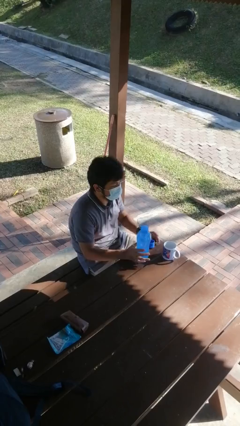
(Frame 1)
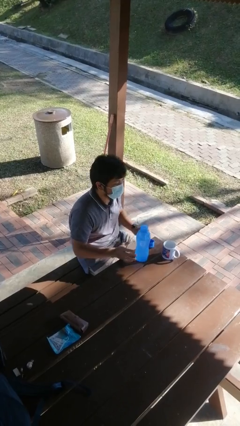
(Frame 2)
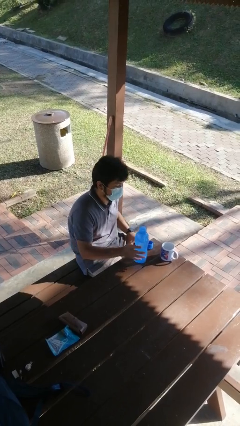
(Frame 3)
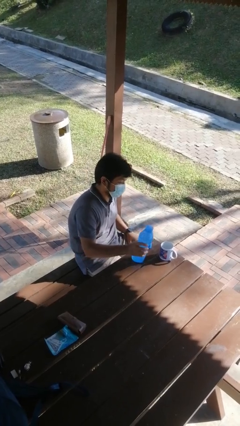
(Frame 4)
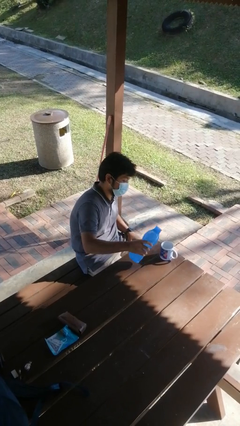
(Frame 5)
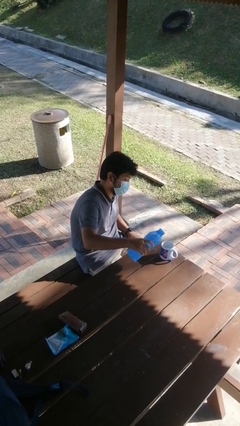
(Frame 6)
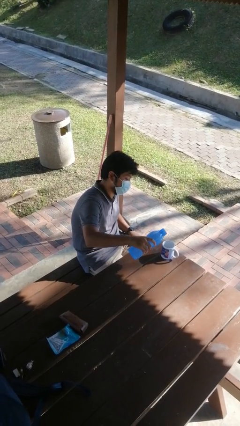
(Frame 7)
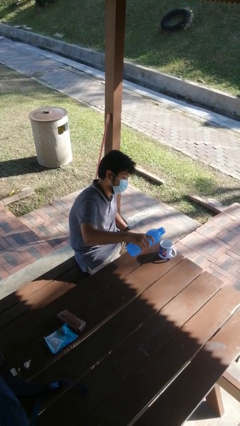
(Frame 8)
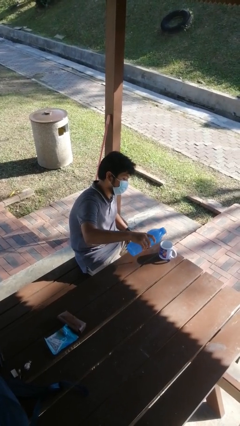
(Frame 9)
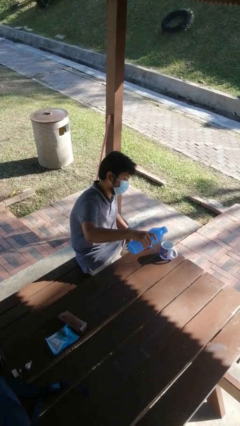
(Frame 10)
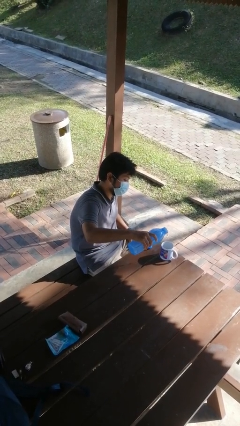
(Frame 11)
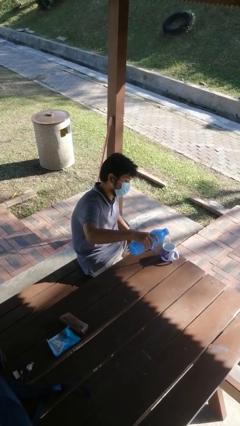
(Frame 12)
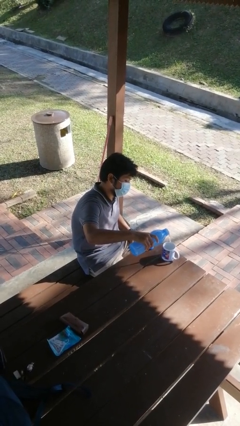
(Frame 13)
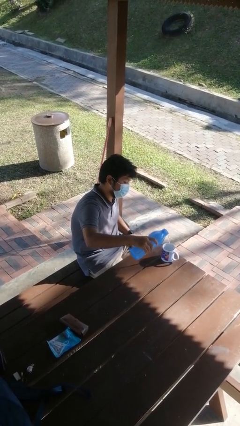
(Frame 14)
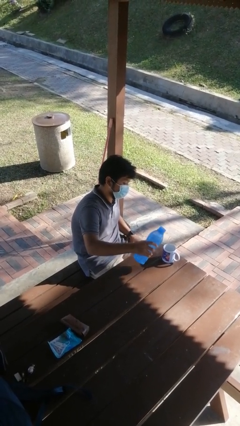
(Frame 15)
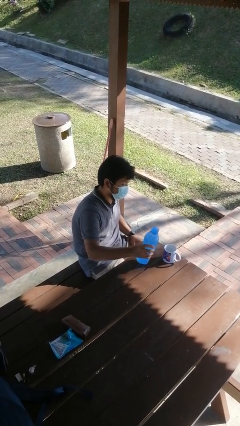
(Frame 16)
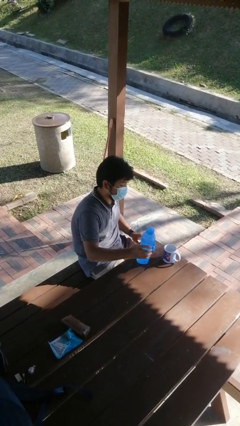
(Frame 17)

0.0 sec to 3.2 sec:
person pours liquid into cup

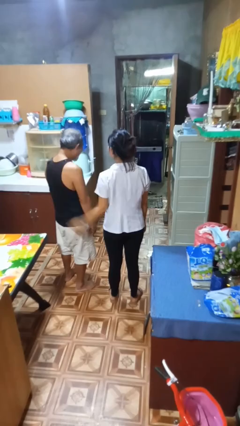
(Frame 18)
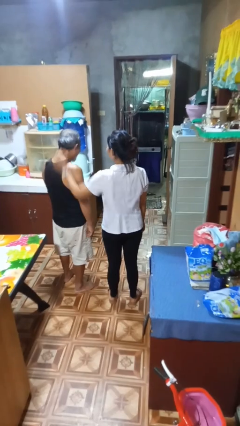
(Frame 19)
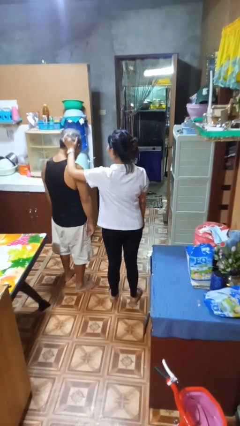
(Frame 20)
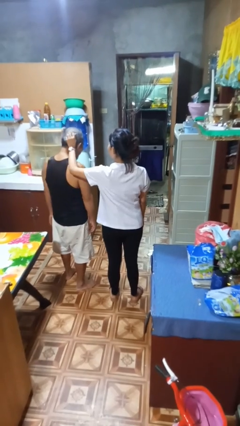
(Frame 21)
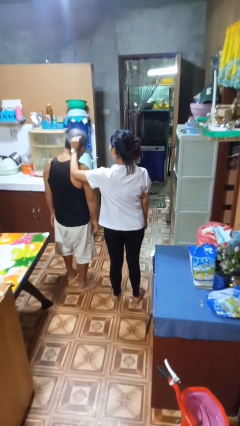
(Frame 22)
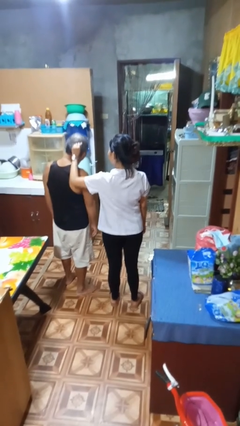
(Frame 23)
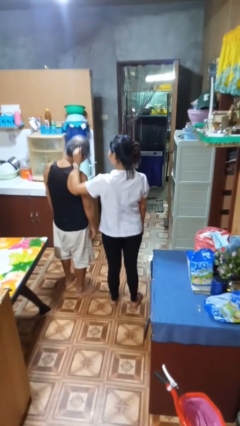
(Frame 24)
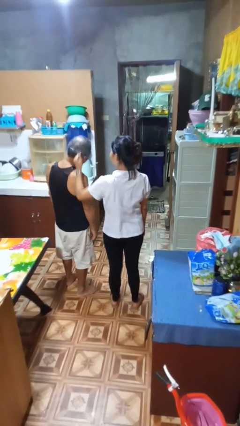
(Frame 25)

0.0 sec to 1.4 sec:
person grabs person by hair

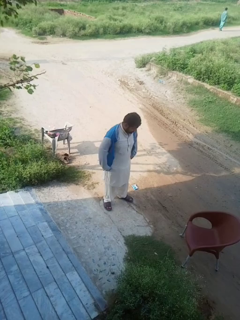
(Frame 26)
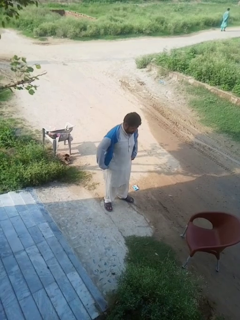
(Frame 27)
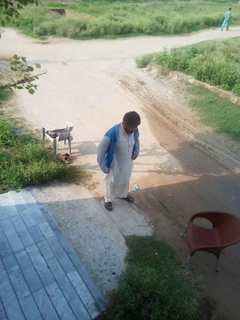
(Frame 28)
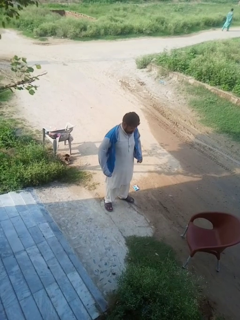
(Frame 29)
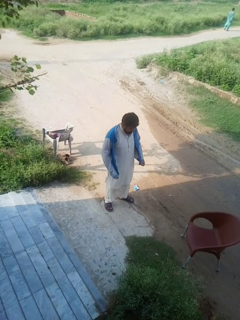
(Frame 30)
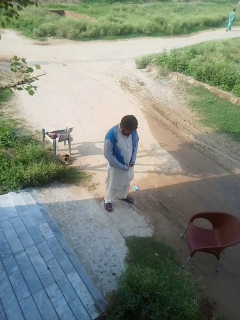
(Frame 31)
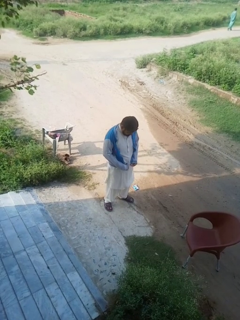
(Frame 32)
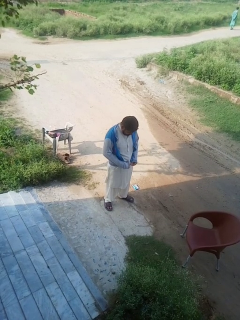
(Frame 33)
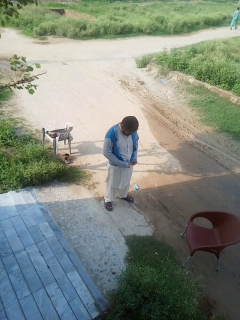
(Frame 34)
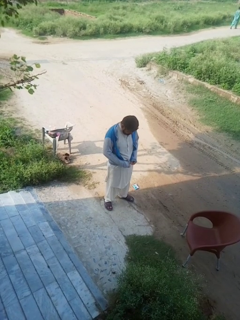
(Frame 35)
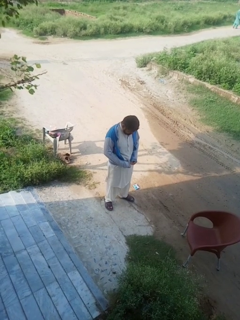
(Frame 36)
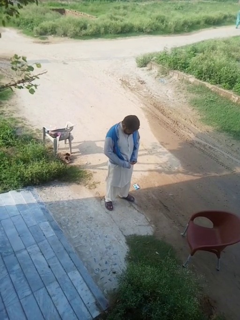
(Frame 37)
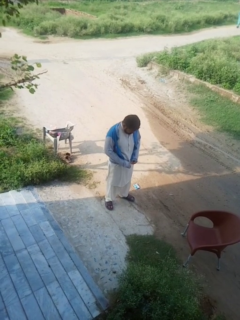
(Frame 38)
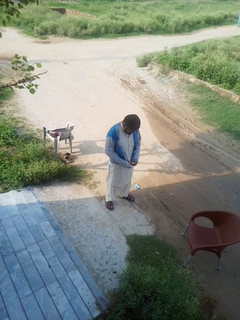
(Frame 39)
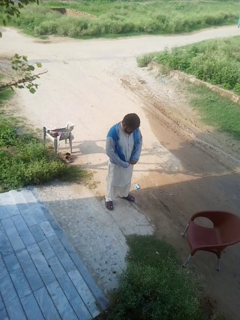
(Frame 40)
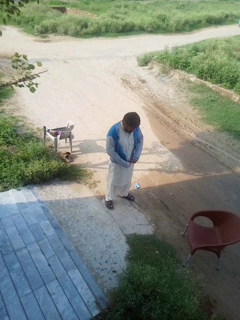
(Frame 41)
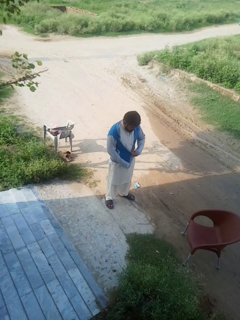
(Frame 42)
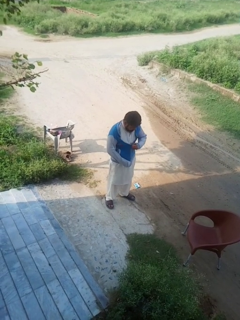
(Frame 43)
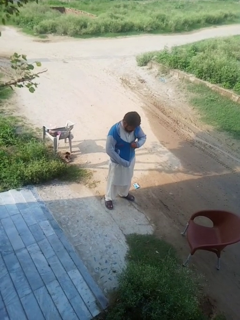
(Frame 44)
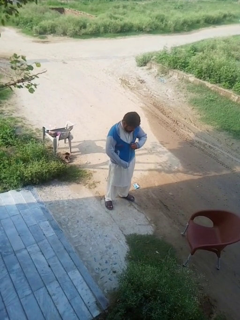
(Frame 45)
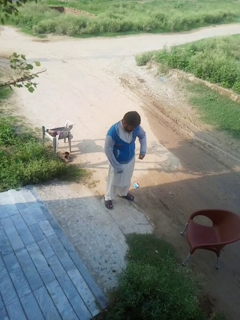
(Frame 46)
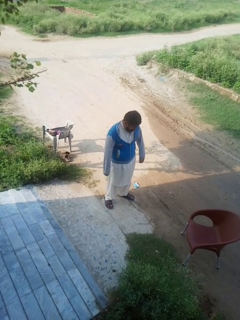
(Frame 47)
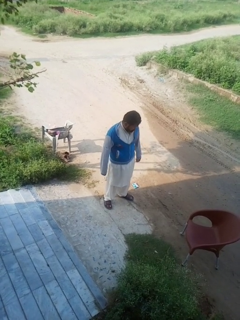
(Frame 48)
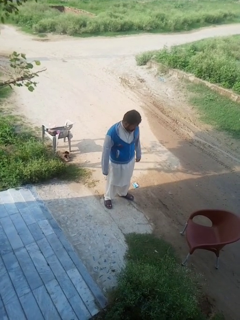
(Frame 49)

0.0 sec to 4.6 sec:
person zips up jacket

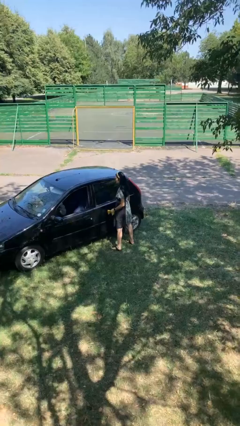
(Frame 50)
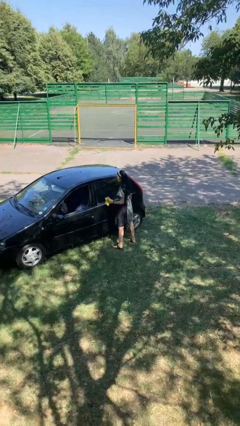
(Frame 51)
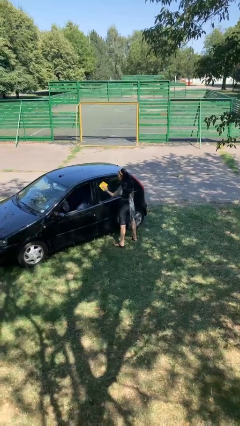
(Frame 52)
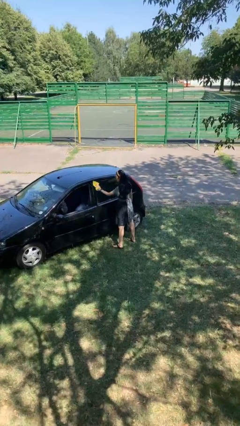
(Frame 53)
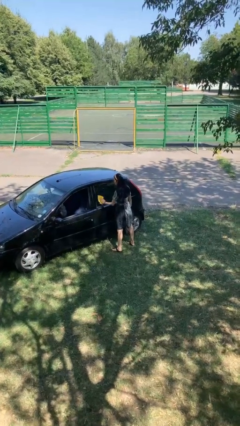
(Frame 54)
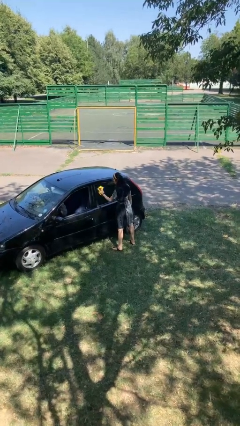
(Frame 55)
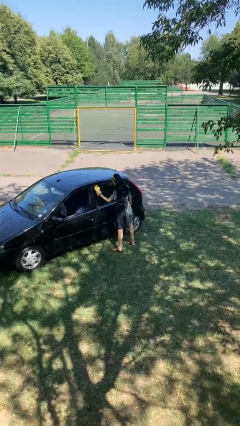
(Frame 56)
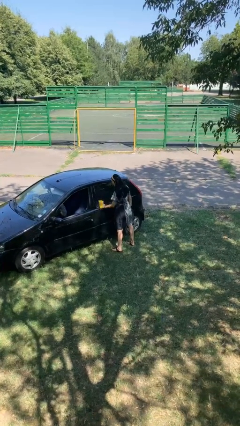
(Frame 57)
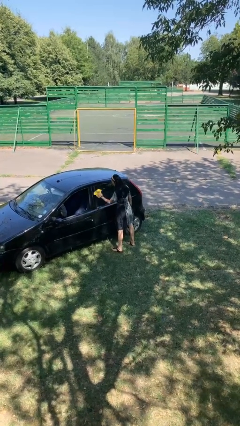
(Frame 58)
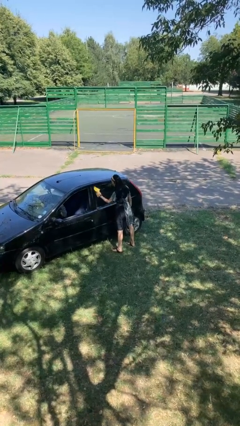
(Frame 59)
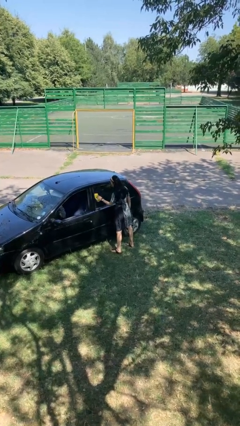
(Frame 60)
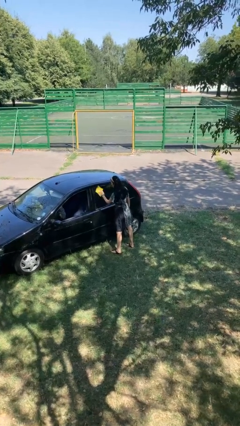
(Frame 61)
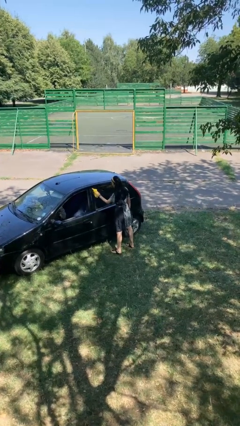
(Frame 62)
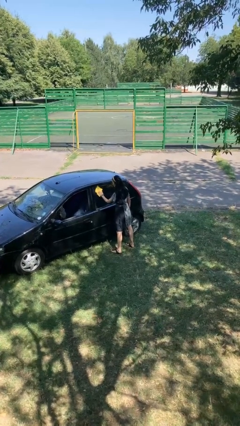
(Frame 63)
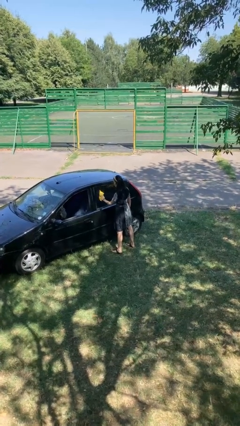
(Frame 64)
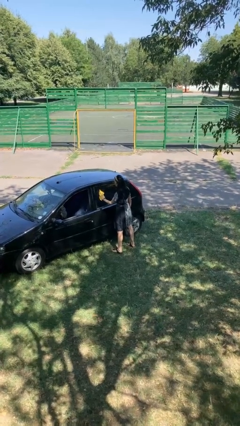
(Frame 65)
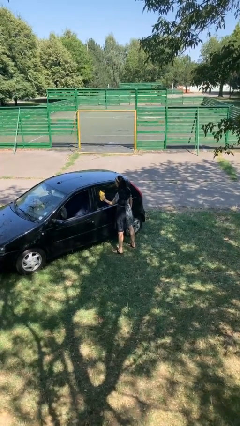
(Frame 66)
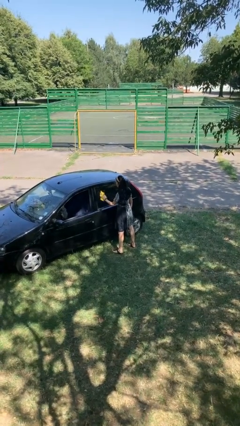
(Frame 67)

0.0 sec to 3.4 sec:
person polishes car with rag

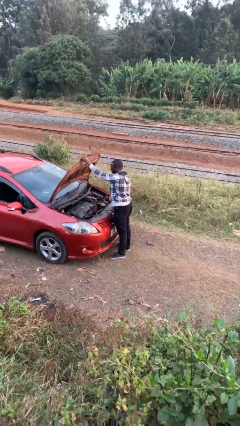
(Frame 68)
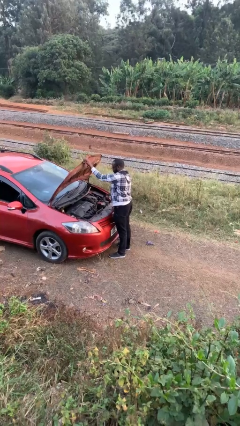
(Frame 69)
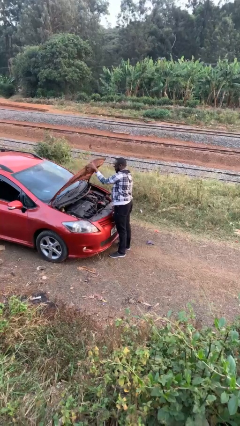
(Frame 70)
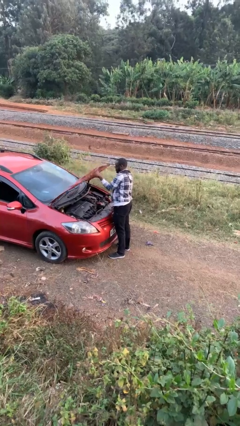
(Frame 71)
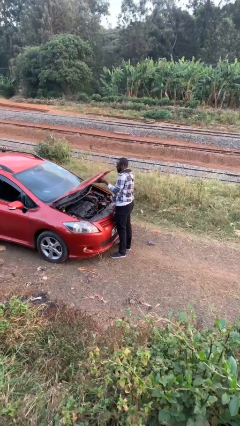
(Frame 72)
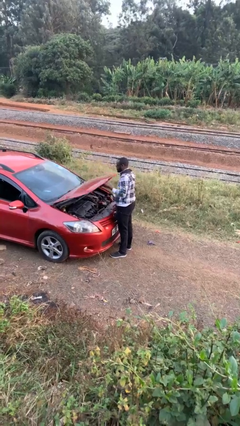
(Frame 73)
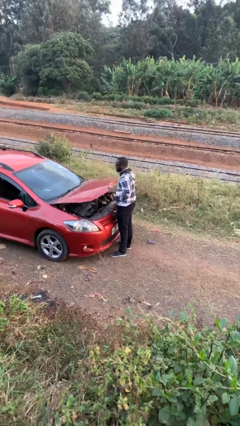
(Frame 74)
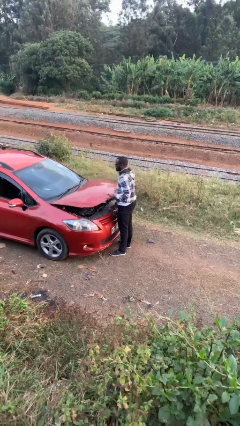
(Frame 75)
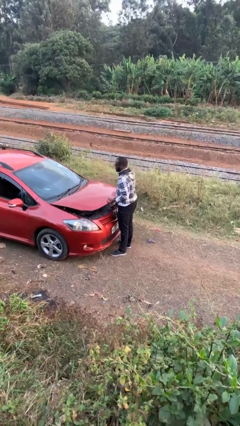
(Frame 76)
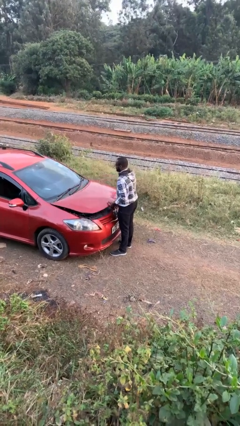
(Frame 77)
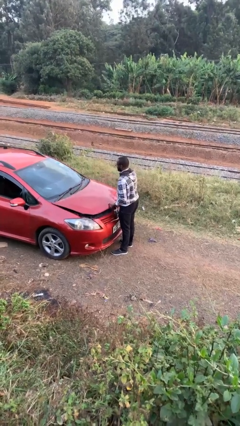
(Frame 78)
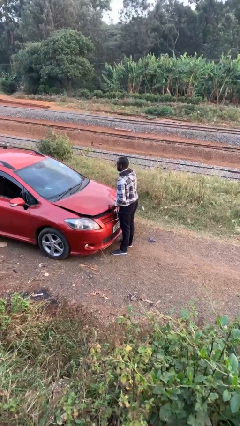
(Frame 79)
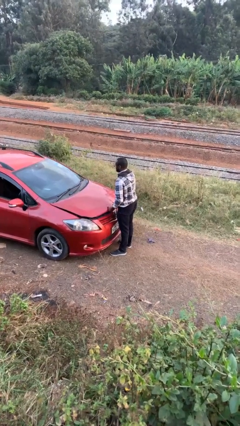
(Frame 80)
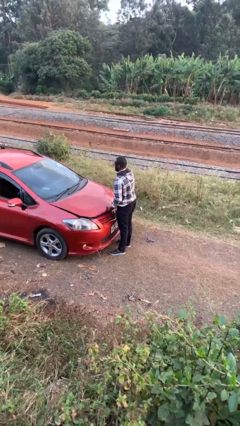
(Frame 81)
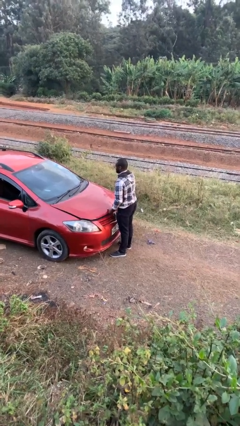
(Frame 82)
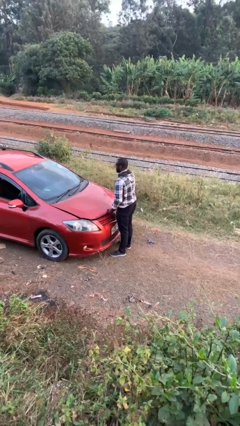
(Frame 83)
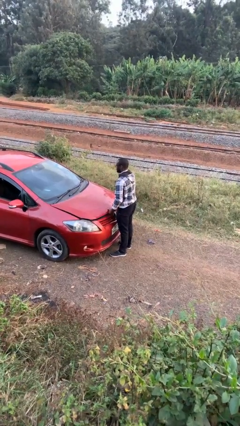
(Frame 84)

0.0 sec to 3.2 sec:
person closes car hood

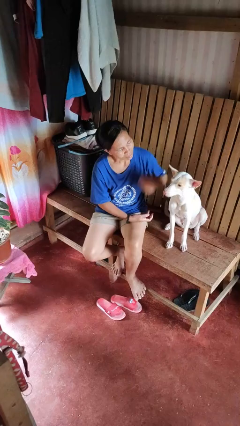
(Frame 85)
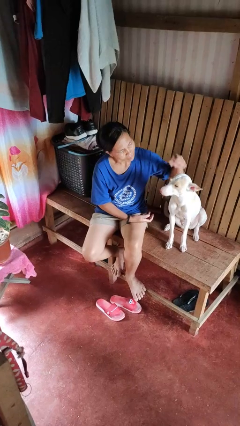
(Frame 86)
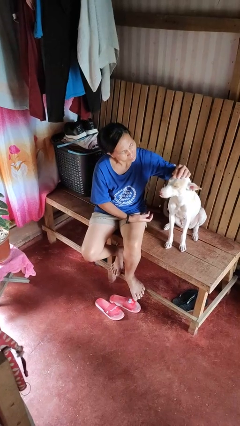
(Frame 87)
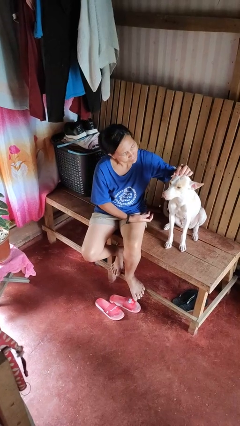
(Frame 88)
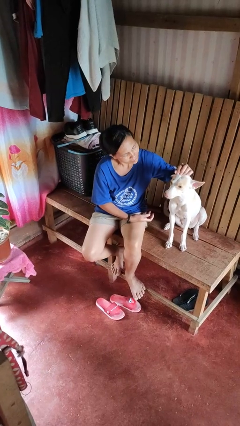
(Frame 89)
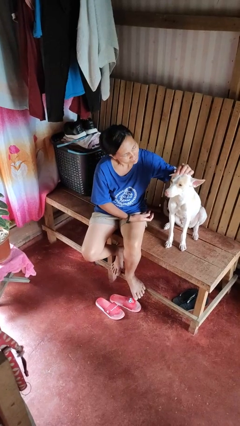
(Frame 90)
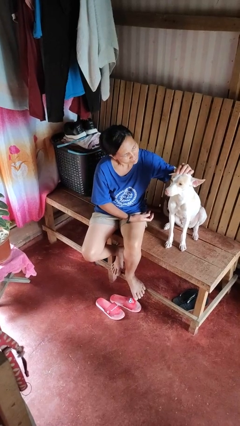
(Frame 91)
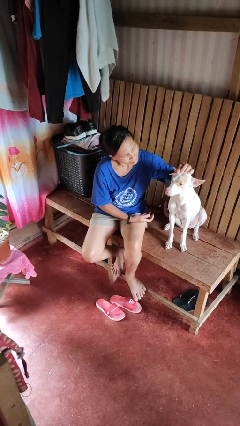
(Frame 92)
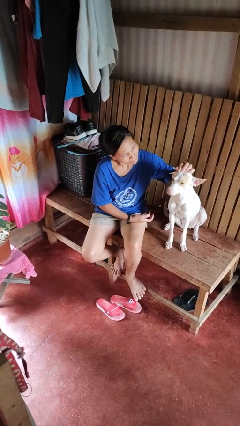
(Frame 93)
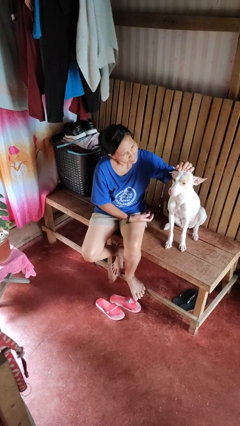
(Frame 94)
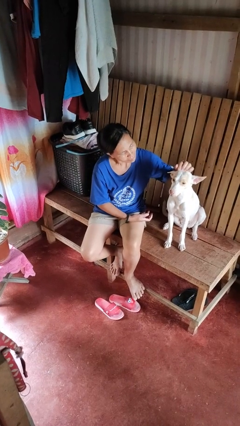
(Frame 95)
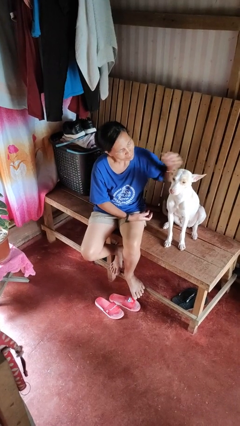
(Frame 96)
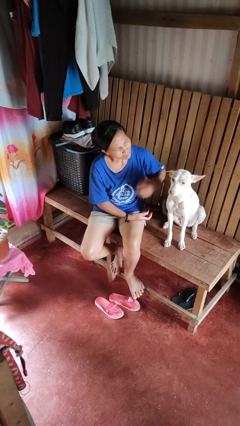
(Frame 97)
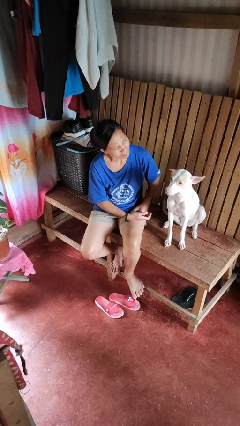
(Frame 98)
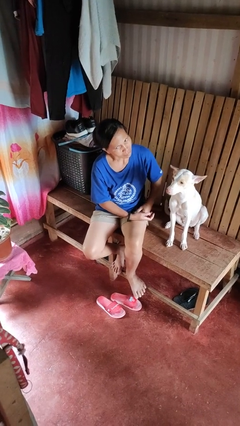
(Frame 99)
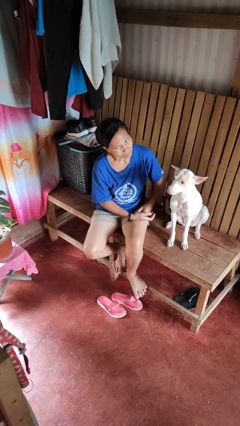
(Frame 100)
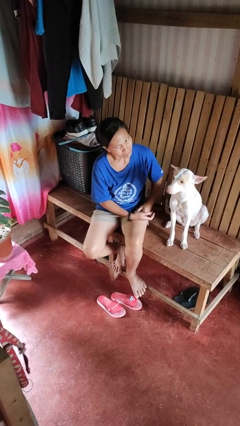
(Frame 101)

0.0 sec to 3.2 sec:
person pets dog
